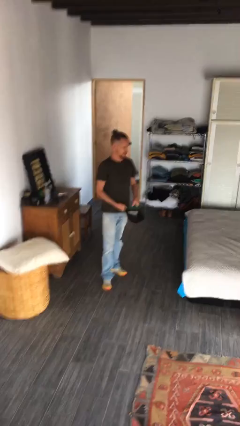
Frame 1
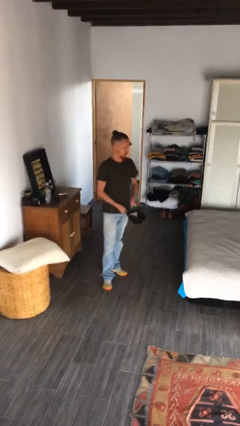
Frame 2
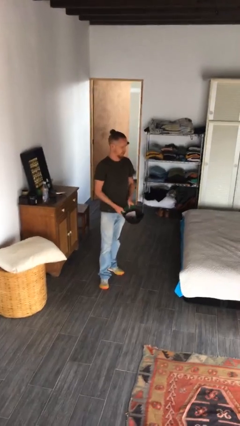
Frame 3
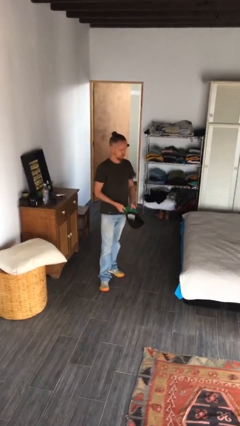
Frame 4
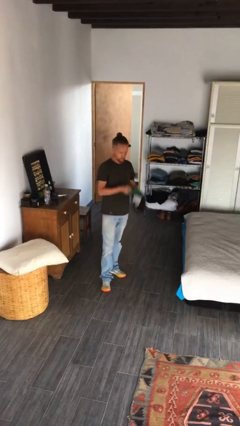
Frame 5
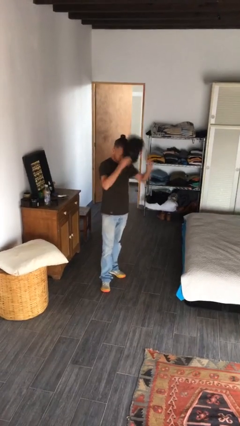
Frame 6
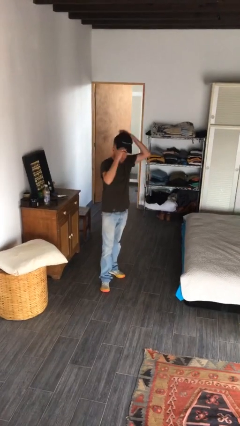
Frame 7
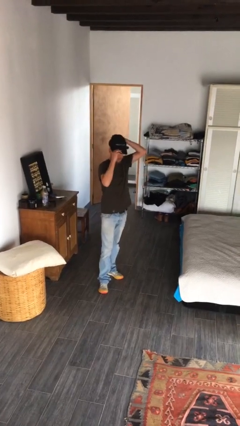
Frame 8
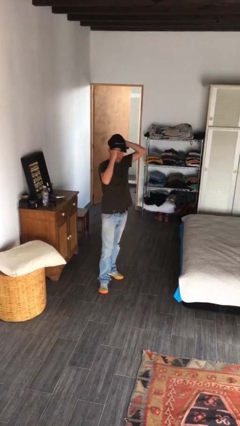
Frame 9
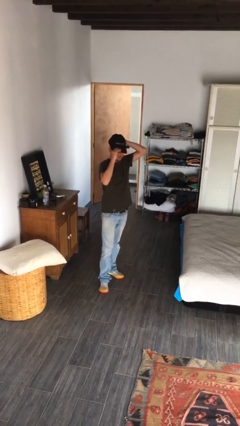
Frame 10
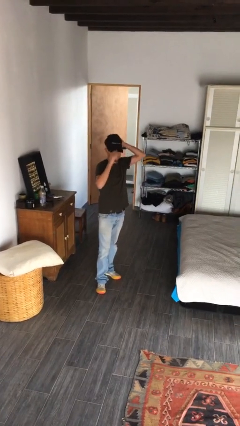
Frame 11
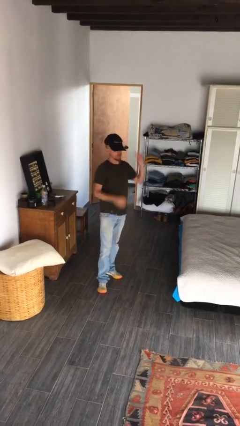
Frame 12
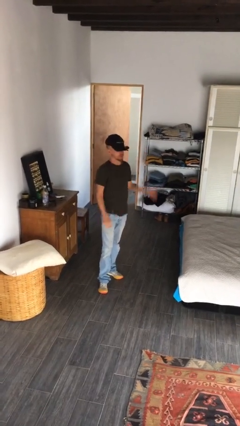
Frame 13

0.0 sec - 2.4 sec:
person puts on hat

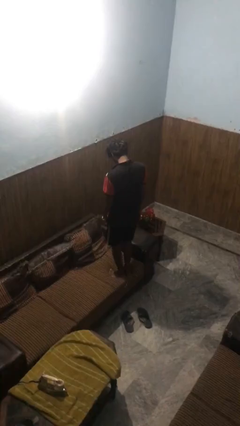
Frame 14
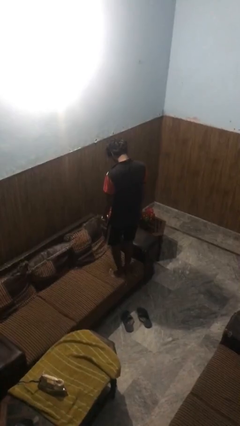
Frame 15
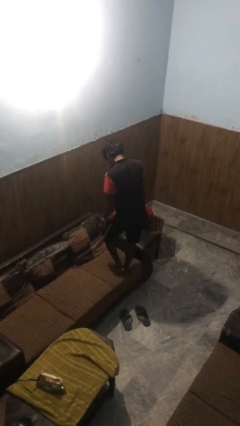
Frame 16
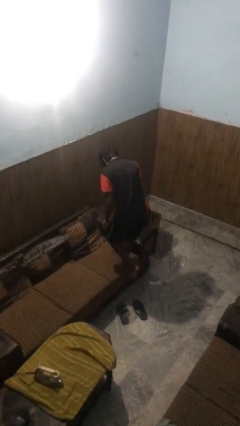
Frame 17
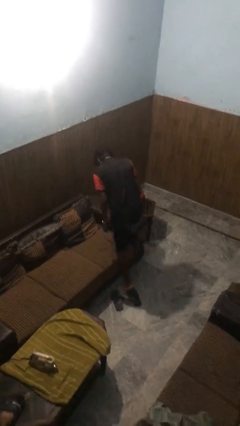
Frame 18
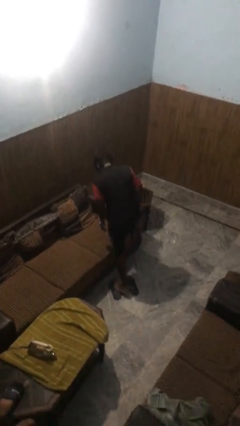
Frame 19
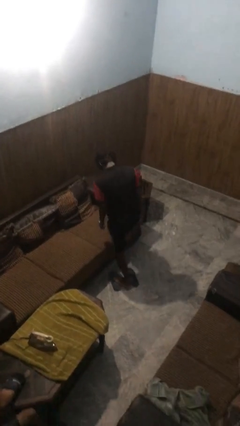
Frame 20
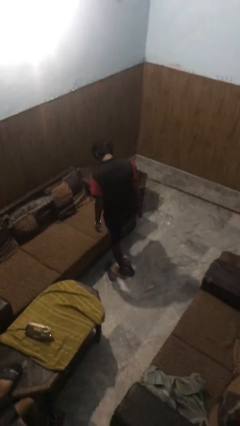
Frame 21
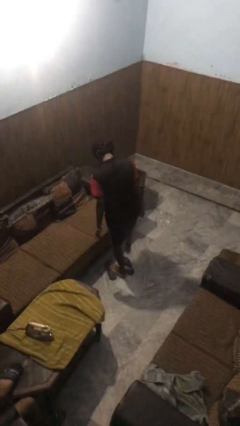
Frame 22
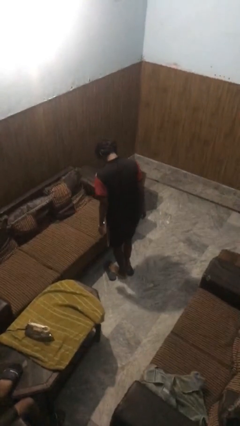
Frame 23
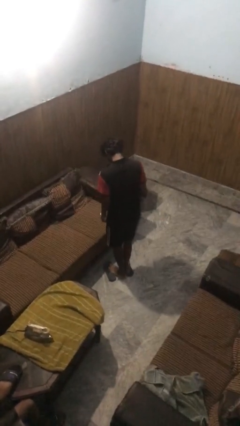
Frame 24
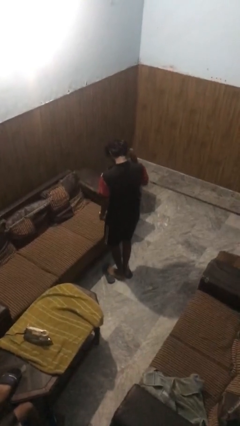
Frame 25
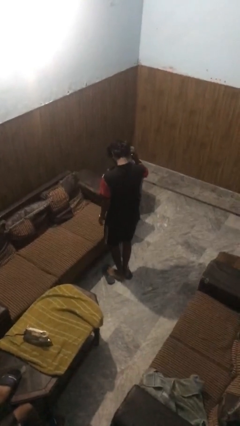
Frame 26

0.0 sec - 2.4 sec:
person climbs off couch

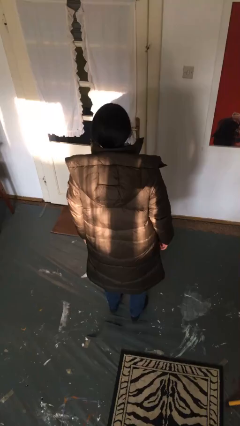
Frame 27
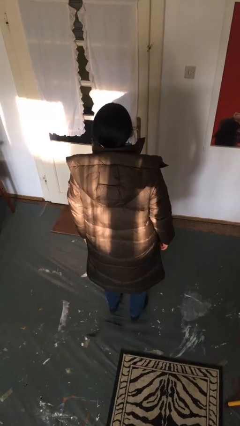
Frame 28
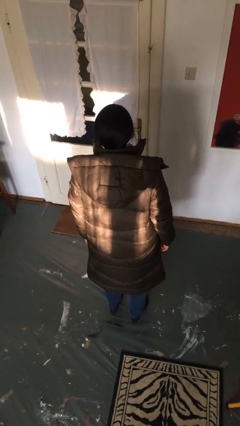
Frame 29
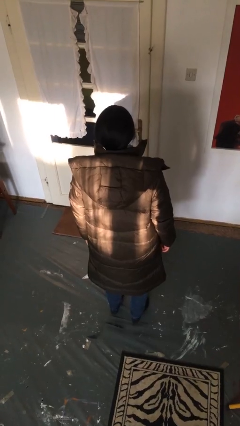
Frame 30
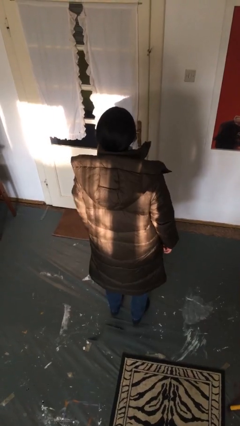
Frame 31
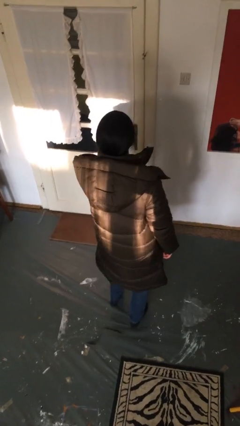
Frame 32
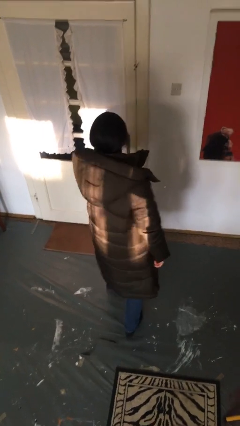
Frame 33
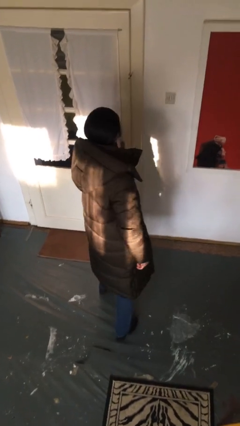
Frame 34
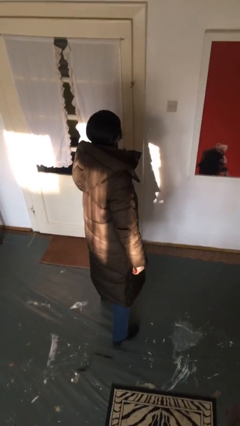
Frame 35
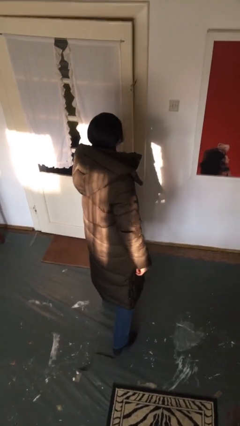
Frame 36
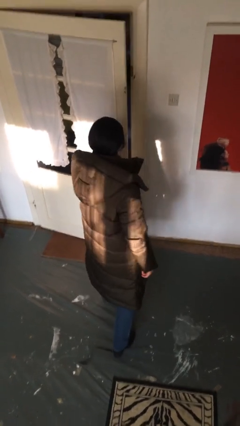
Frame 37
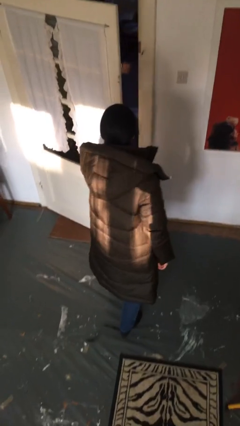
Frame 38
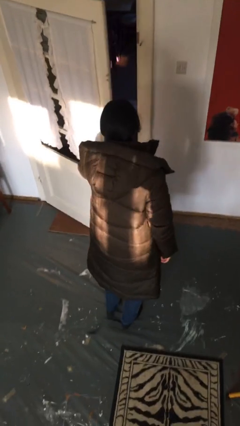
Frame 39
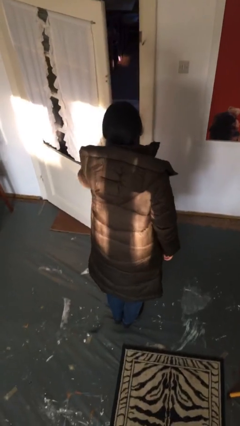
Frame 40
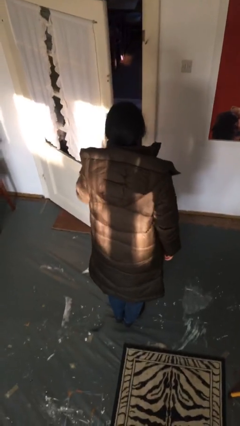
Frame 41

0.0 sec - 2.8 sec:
person opens facility door

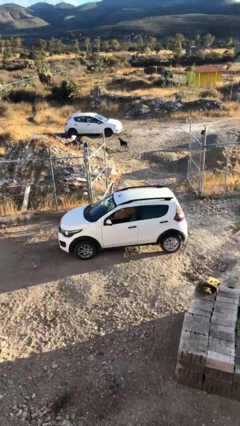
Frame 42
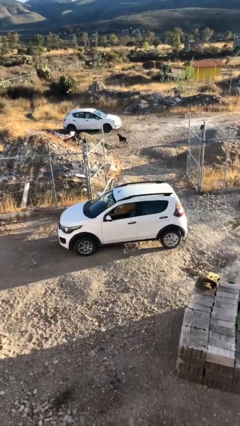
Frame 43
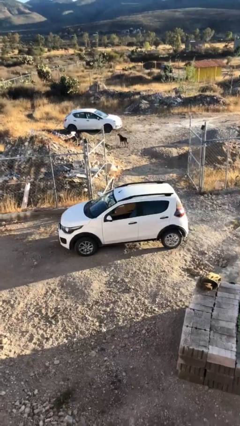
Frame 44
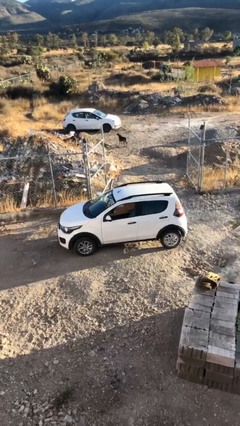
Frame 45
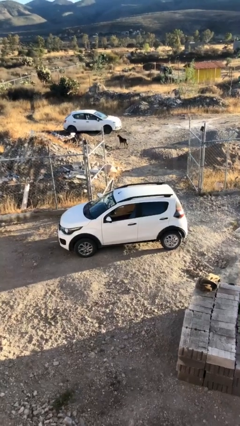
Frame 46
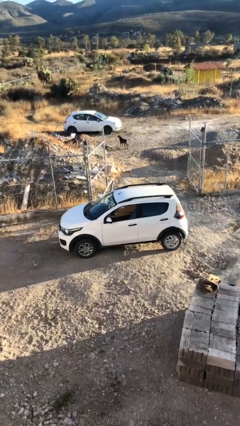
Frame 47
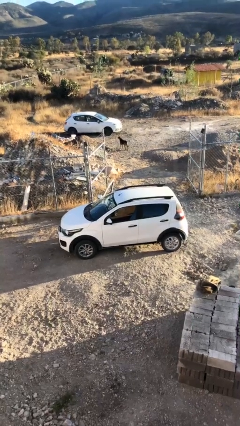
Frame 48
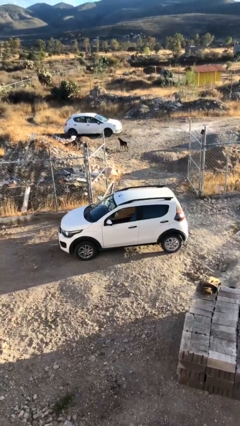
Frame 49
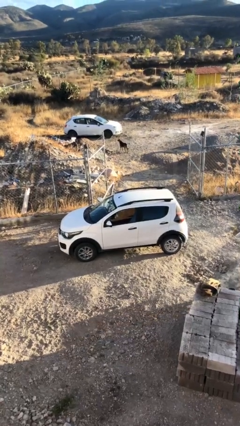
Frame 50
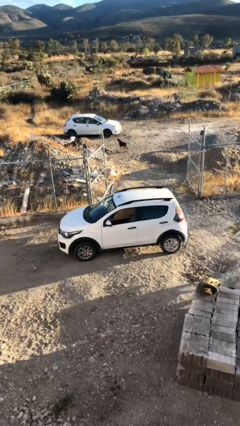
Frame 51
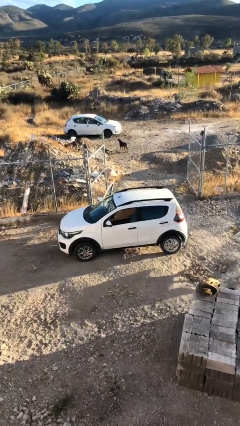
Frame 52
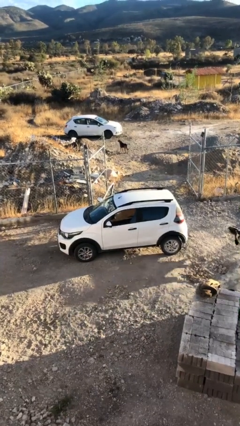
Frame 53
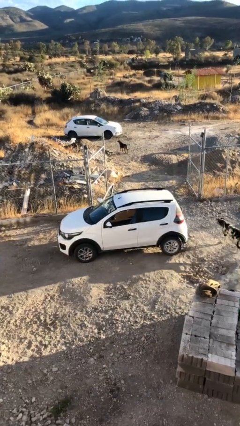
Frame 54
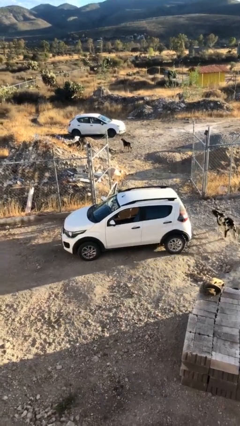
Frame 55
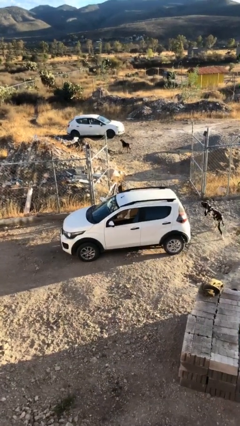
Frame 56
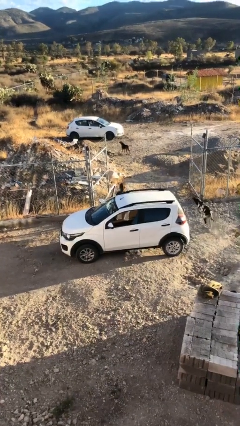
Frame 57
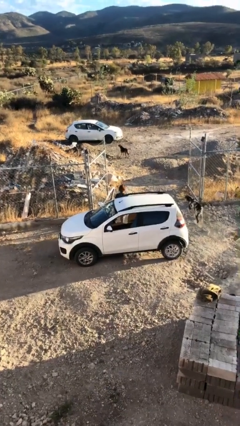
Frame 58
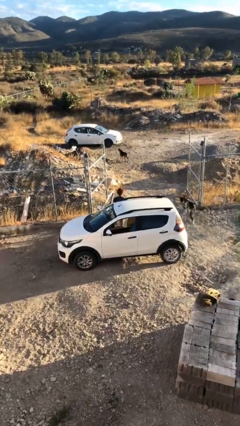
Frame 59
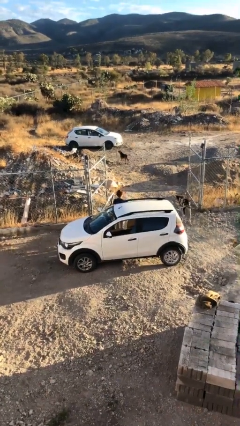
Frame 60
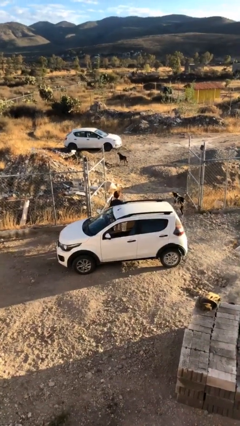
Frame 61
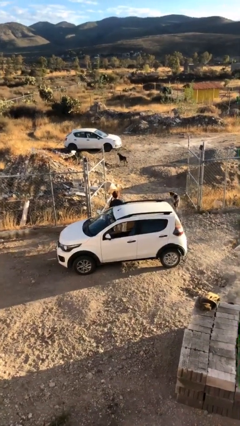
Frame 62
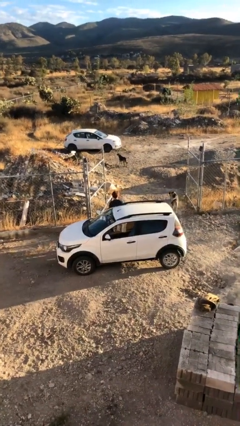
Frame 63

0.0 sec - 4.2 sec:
person exits car

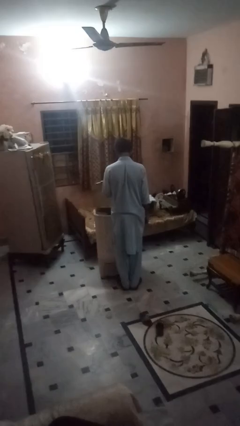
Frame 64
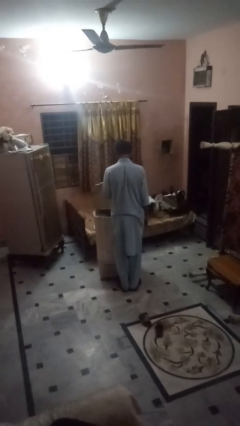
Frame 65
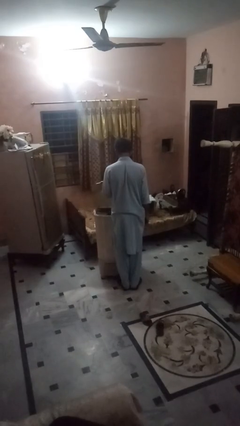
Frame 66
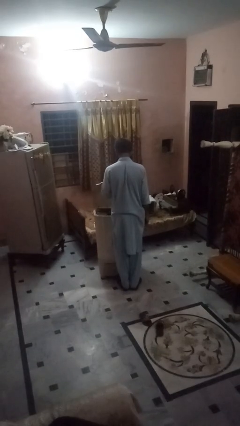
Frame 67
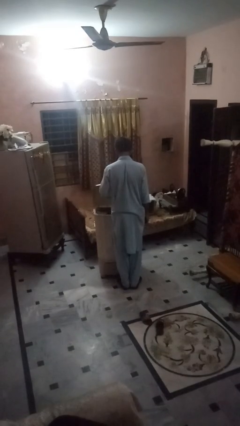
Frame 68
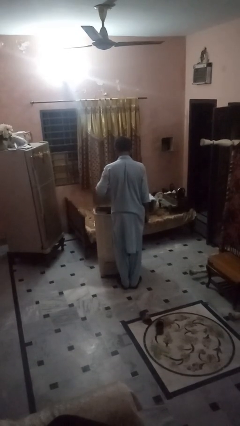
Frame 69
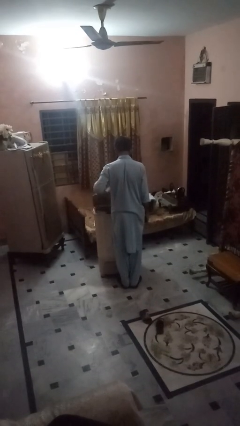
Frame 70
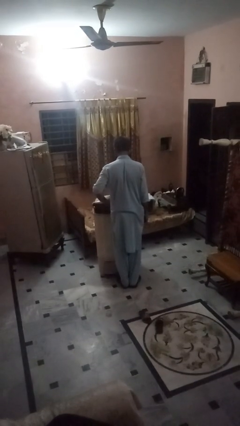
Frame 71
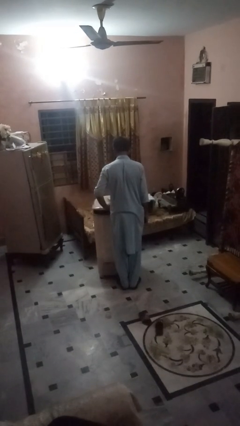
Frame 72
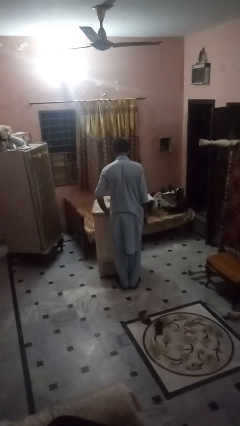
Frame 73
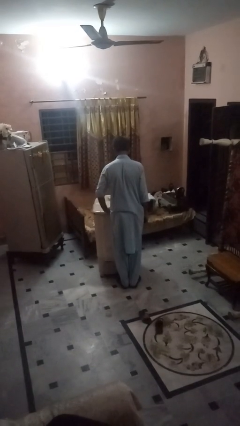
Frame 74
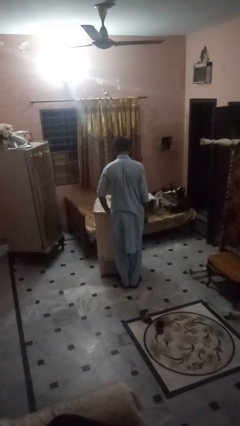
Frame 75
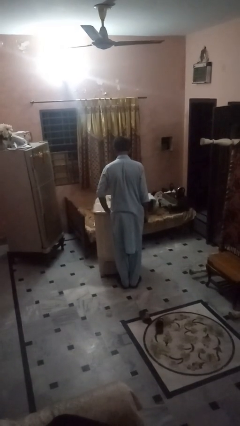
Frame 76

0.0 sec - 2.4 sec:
person closes clothes washer

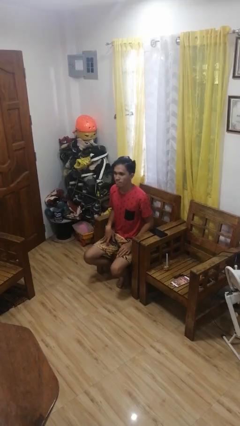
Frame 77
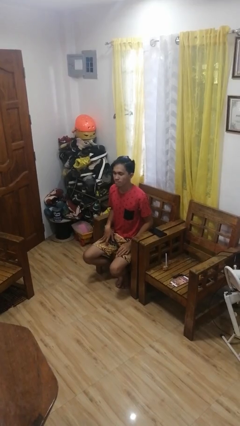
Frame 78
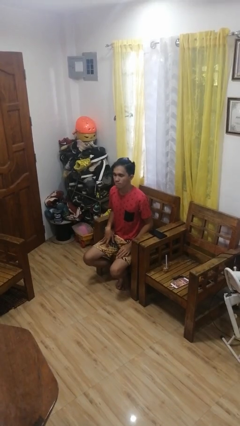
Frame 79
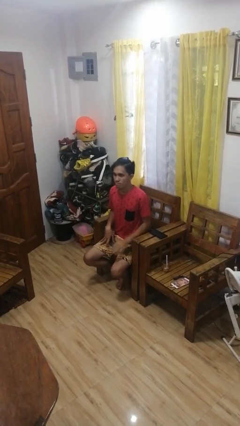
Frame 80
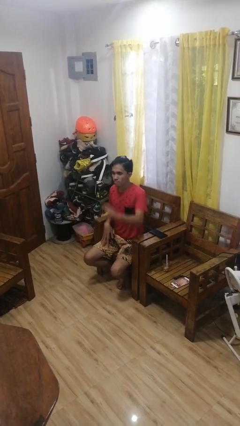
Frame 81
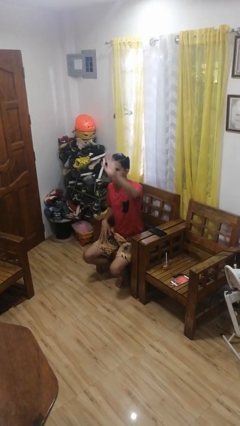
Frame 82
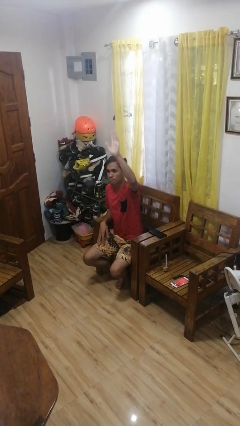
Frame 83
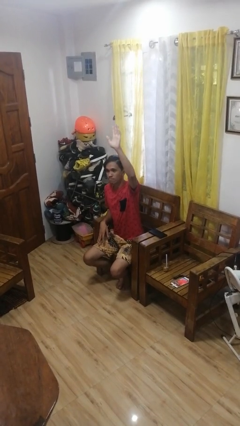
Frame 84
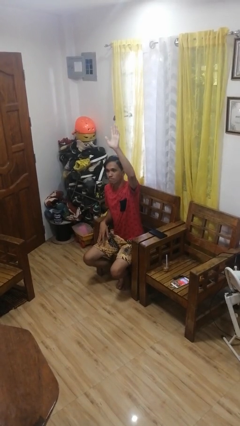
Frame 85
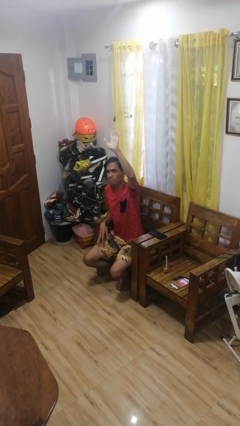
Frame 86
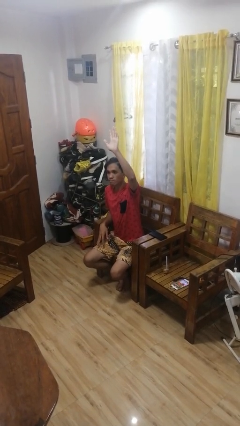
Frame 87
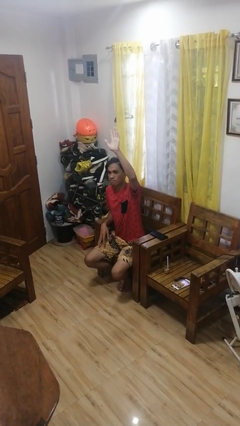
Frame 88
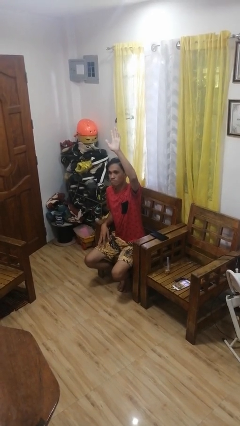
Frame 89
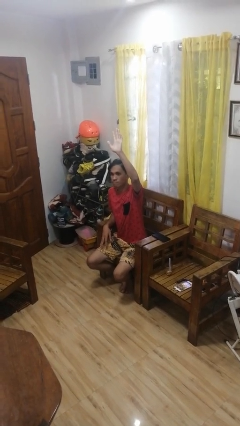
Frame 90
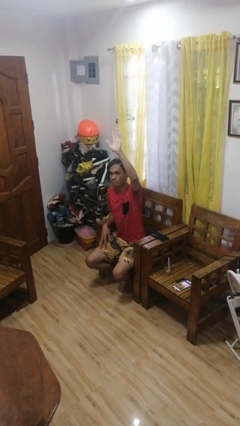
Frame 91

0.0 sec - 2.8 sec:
person gestures raise hand

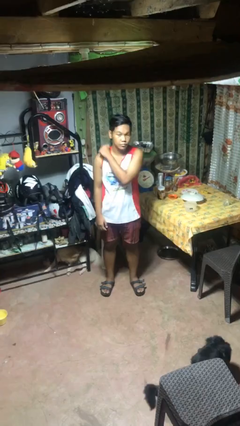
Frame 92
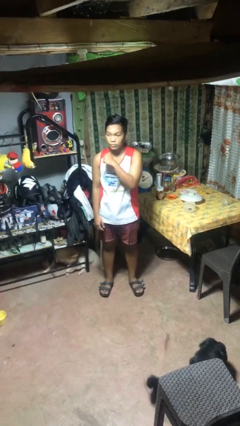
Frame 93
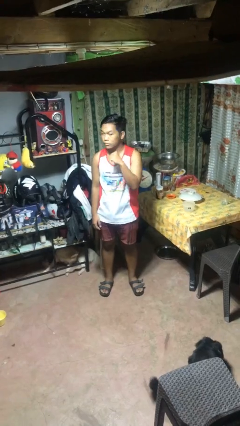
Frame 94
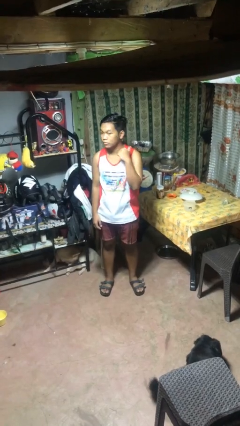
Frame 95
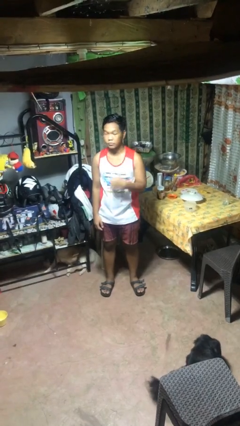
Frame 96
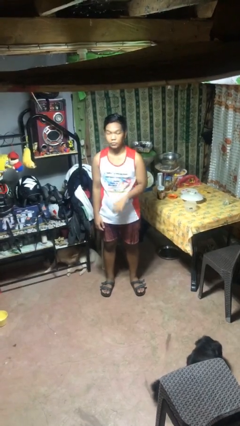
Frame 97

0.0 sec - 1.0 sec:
person gestures cut
